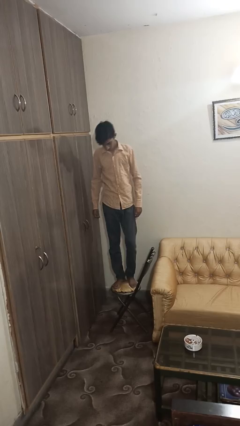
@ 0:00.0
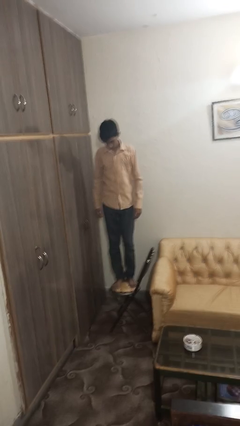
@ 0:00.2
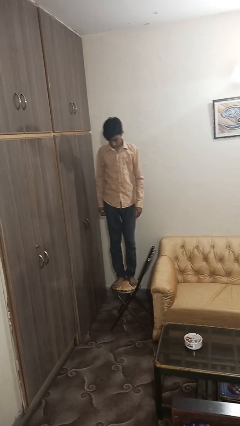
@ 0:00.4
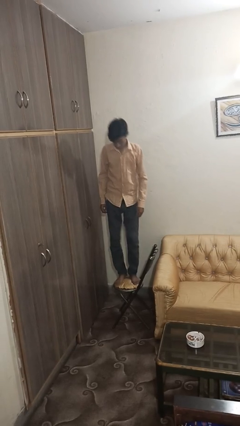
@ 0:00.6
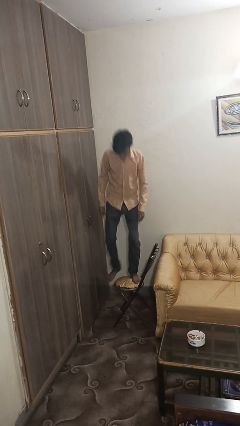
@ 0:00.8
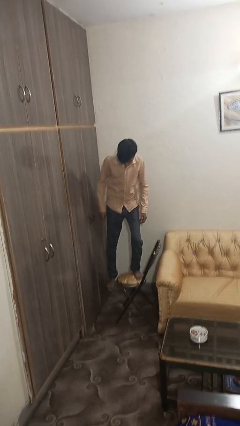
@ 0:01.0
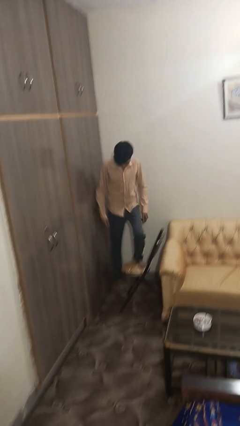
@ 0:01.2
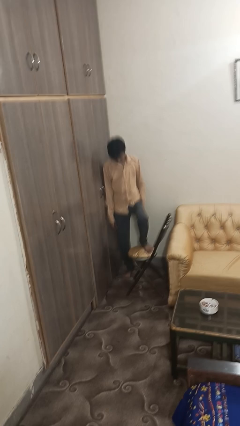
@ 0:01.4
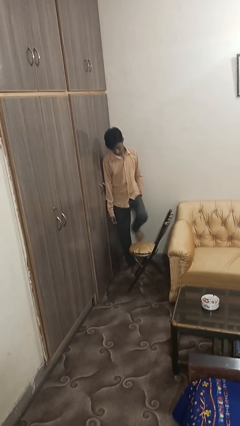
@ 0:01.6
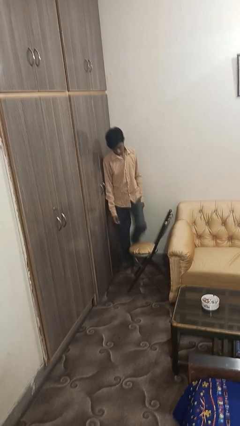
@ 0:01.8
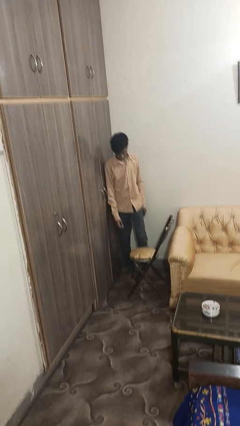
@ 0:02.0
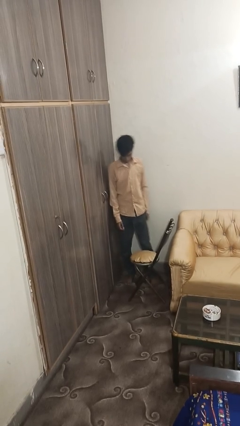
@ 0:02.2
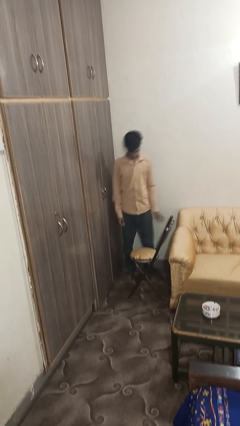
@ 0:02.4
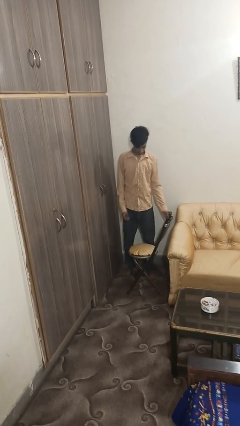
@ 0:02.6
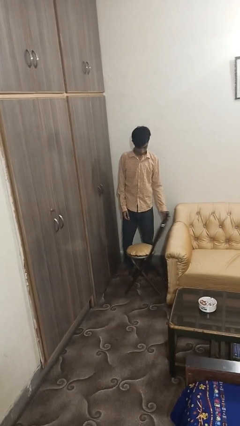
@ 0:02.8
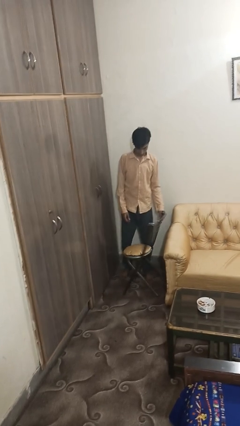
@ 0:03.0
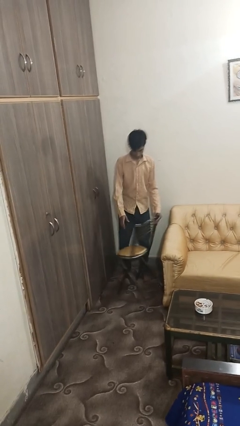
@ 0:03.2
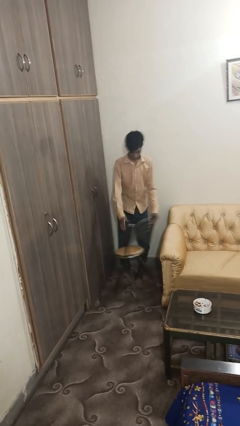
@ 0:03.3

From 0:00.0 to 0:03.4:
person climbs off chair

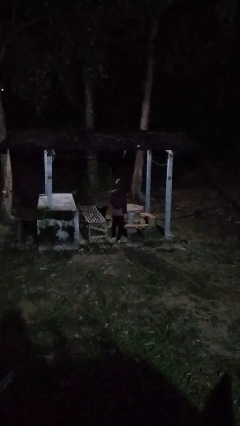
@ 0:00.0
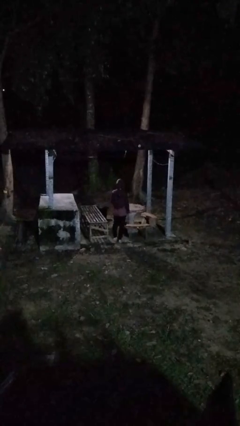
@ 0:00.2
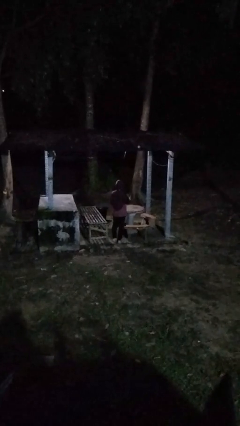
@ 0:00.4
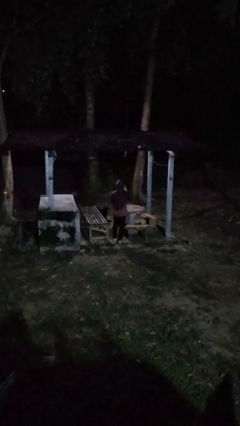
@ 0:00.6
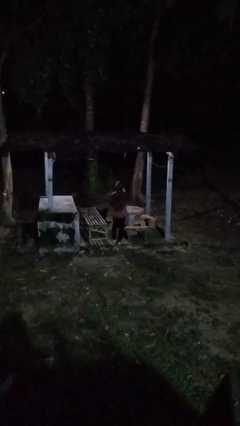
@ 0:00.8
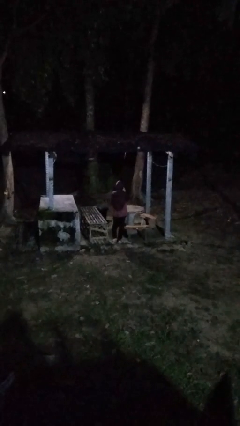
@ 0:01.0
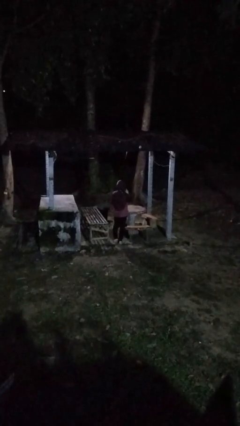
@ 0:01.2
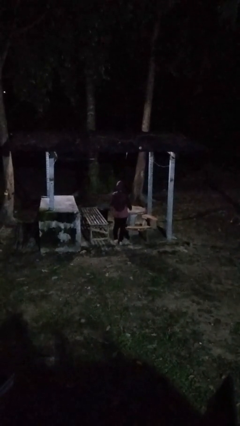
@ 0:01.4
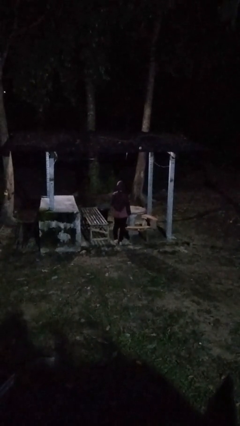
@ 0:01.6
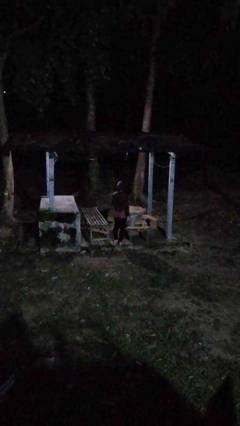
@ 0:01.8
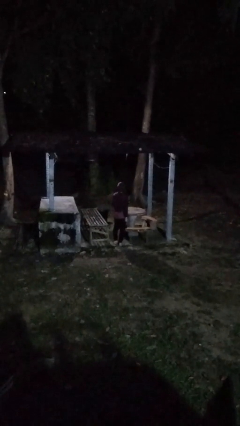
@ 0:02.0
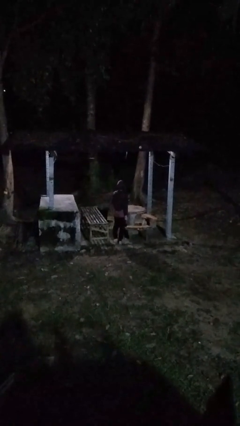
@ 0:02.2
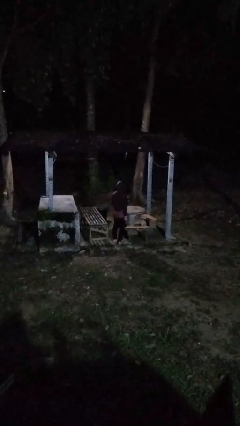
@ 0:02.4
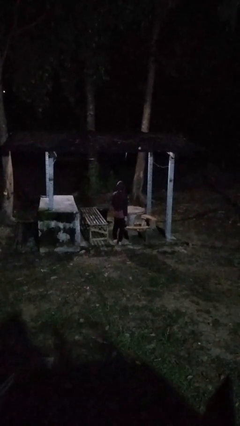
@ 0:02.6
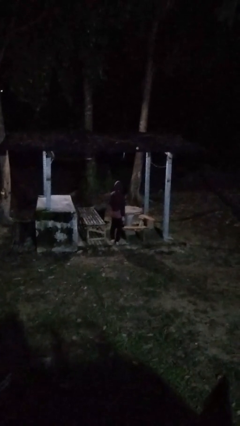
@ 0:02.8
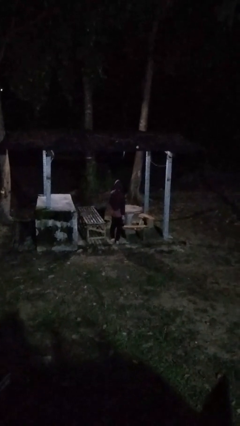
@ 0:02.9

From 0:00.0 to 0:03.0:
person gestures be quiet

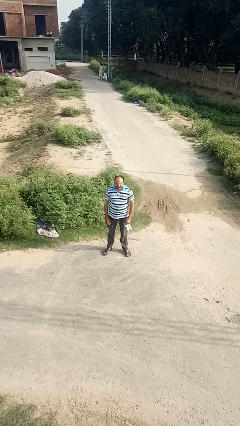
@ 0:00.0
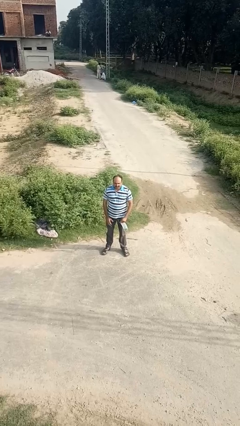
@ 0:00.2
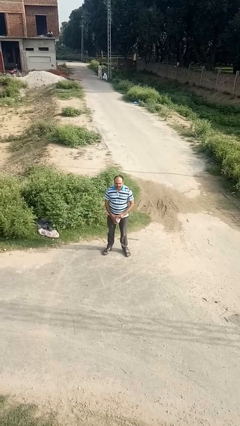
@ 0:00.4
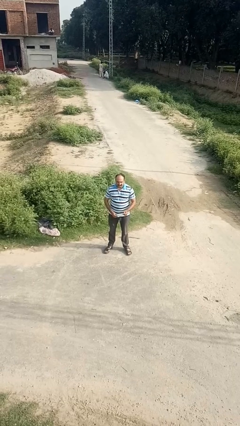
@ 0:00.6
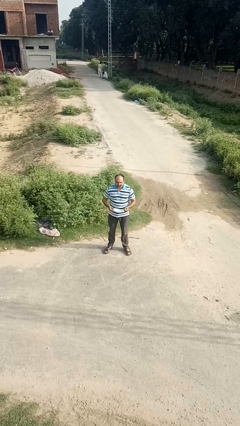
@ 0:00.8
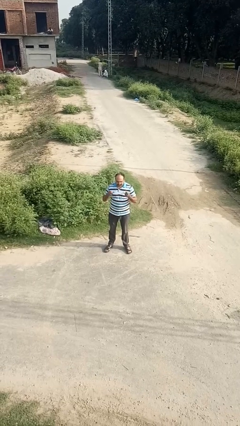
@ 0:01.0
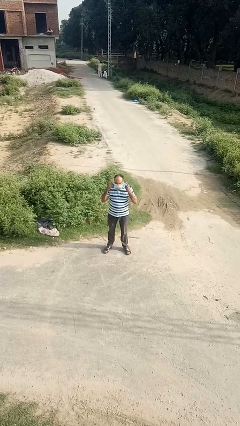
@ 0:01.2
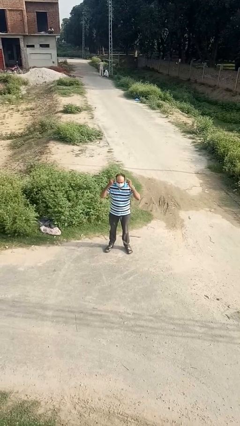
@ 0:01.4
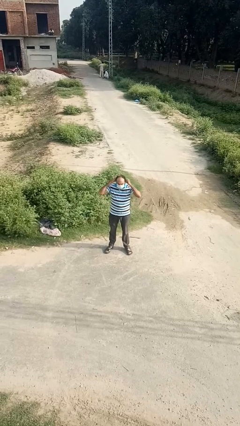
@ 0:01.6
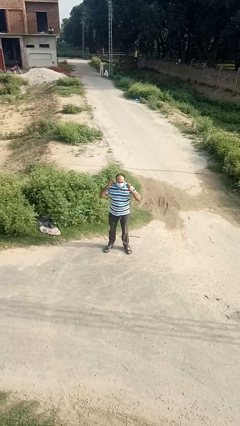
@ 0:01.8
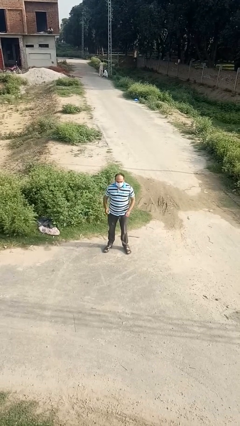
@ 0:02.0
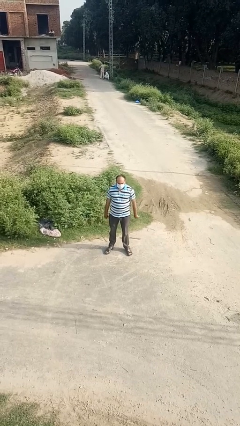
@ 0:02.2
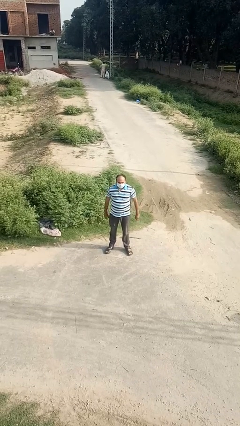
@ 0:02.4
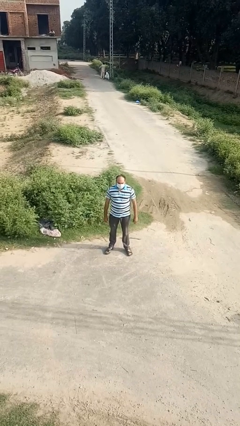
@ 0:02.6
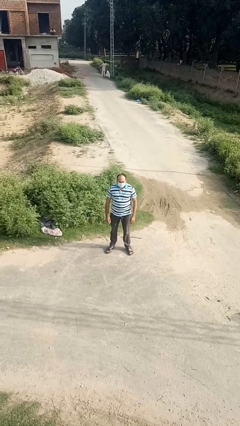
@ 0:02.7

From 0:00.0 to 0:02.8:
person puts on facemask

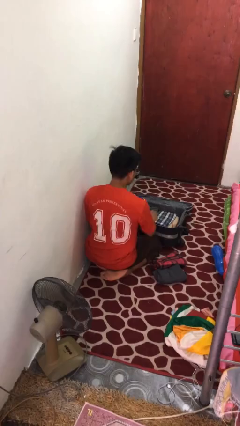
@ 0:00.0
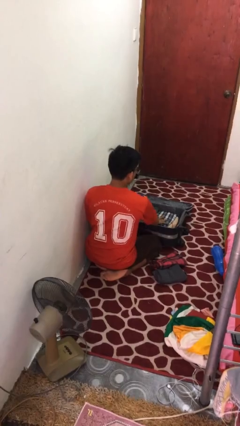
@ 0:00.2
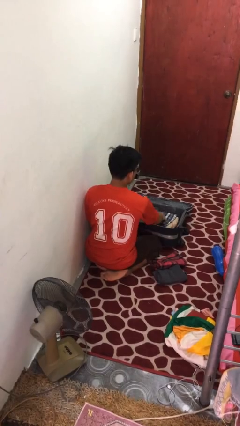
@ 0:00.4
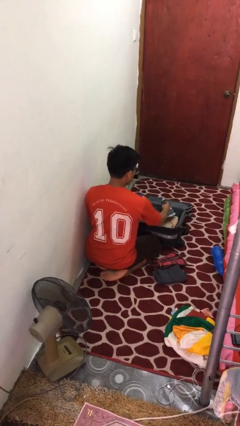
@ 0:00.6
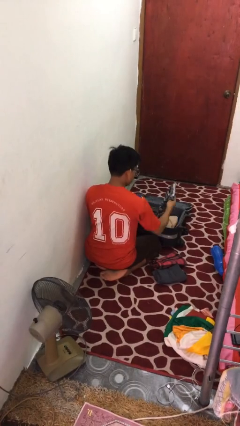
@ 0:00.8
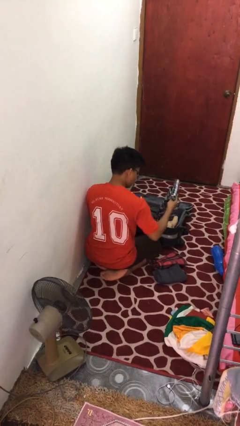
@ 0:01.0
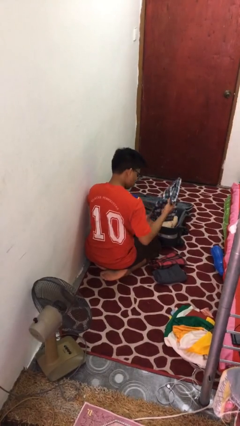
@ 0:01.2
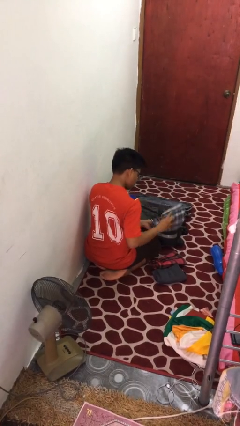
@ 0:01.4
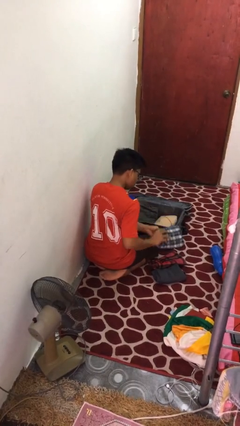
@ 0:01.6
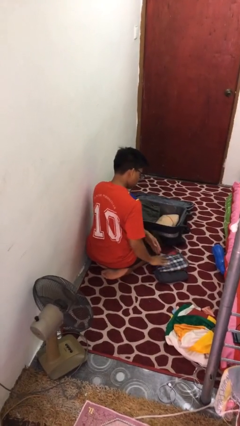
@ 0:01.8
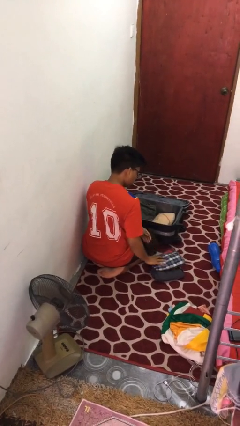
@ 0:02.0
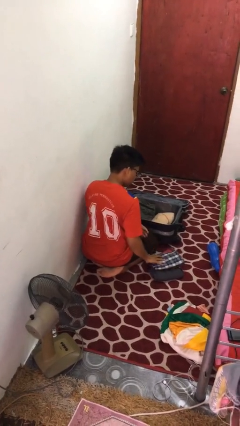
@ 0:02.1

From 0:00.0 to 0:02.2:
person unloads clothes from suitcase

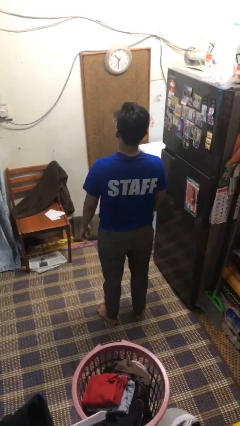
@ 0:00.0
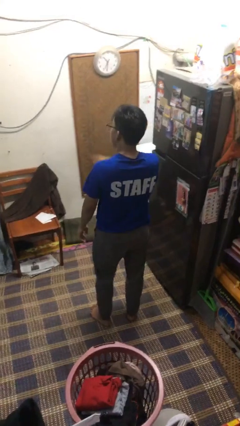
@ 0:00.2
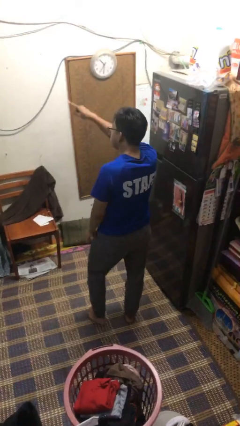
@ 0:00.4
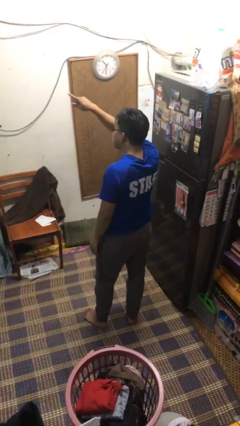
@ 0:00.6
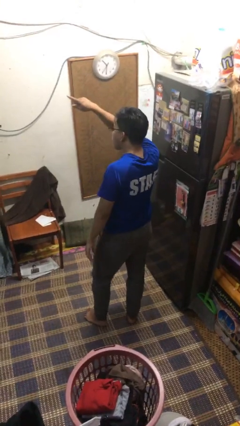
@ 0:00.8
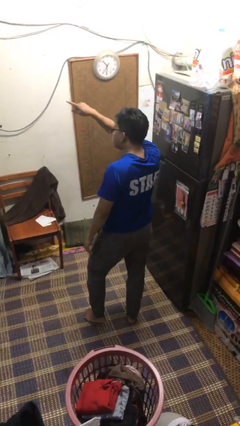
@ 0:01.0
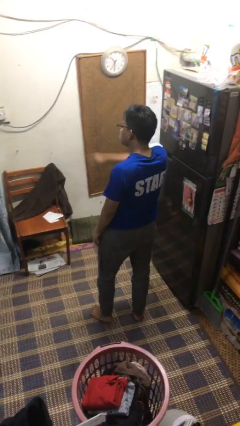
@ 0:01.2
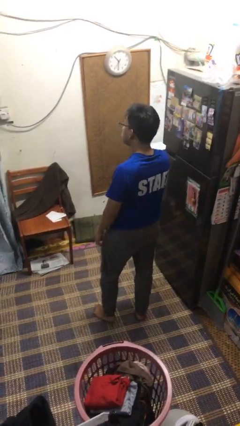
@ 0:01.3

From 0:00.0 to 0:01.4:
person points at person

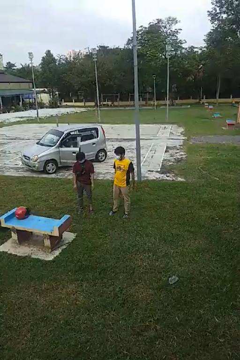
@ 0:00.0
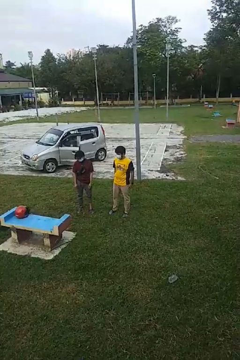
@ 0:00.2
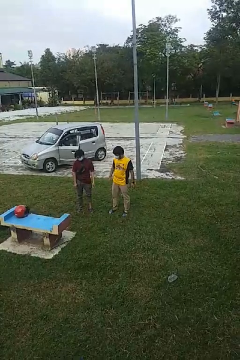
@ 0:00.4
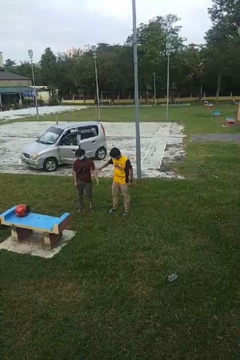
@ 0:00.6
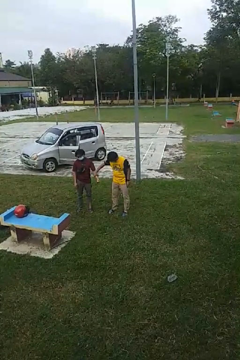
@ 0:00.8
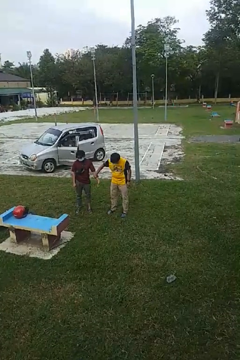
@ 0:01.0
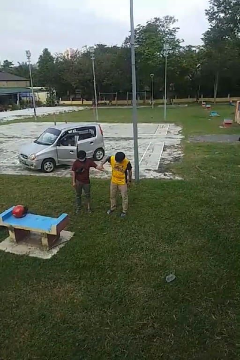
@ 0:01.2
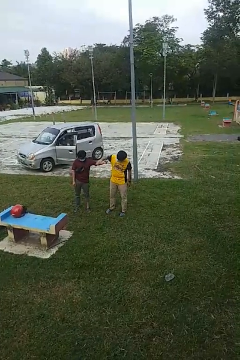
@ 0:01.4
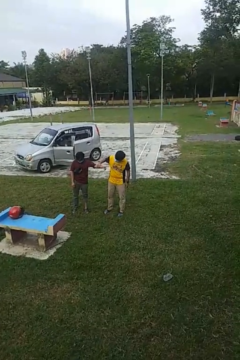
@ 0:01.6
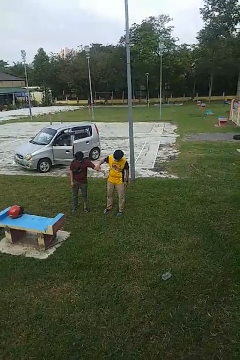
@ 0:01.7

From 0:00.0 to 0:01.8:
person grabs person by forearm

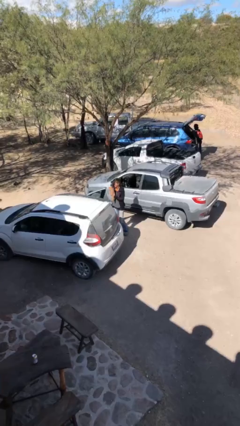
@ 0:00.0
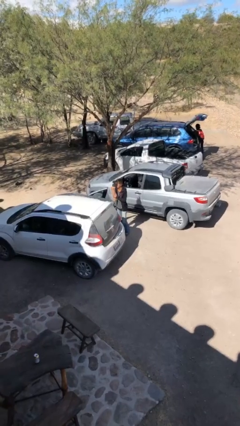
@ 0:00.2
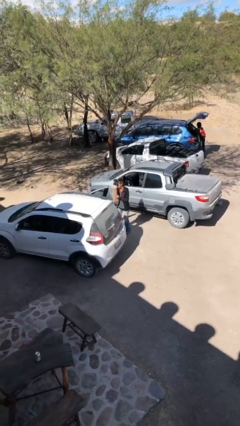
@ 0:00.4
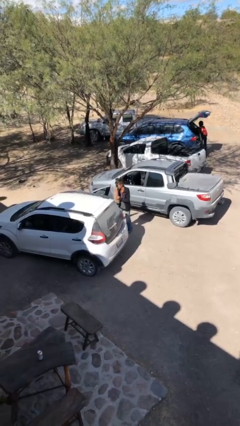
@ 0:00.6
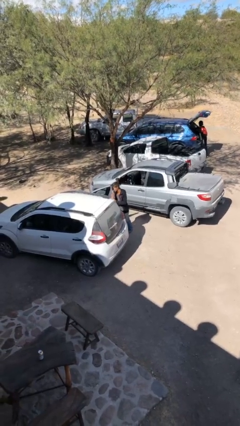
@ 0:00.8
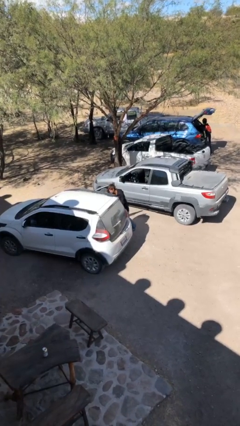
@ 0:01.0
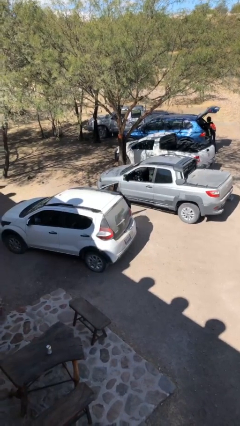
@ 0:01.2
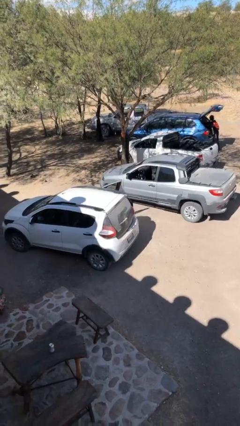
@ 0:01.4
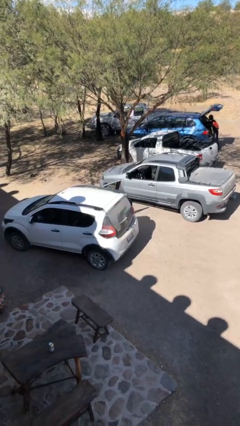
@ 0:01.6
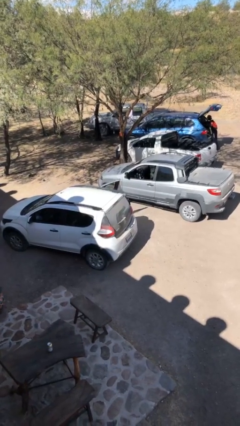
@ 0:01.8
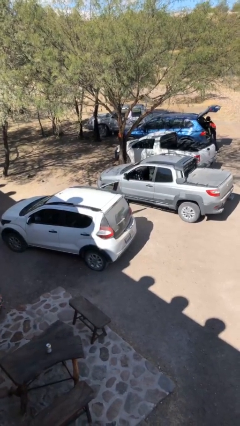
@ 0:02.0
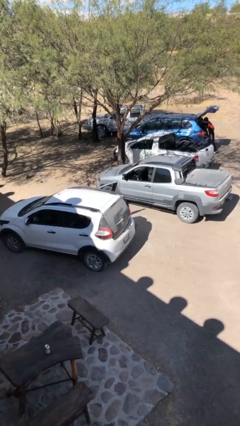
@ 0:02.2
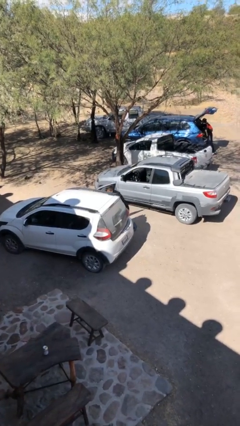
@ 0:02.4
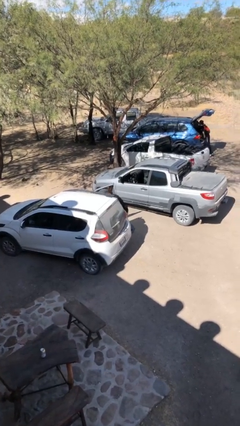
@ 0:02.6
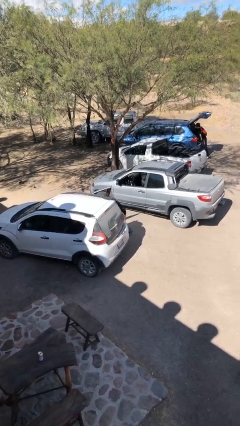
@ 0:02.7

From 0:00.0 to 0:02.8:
person loads car
